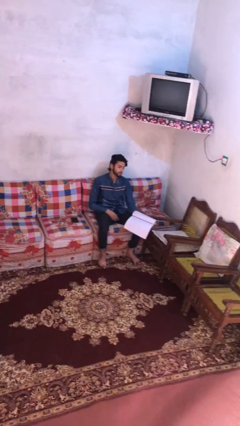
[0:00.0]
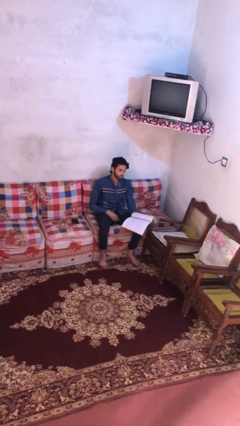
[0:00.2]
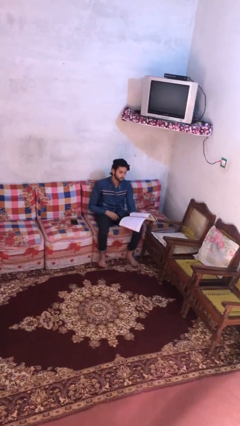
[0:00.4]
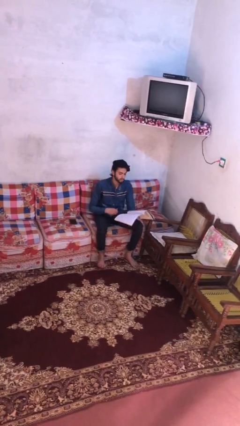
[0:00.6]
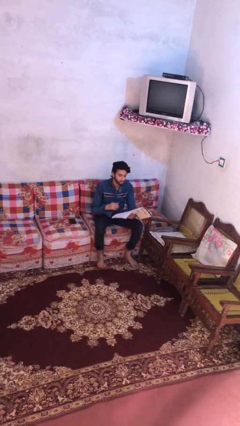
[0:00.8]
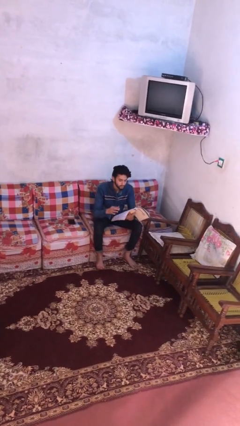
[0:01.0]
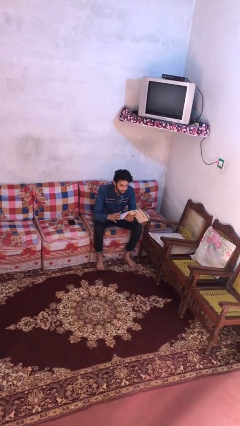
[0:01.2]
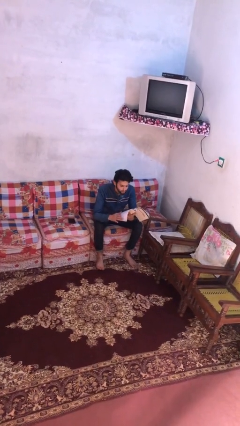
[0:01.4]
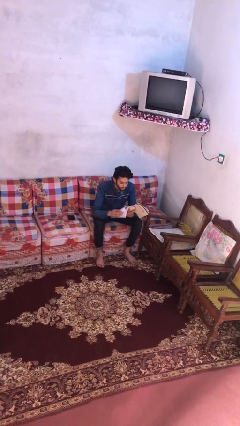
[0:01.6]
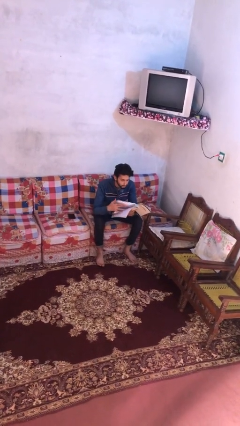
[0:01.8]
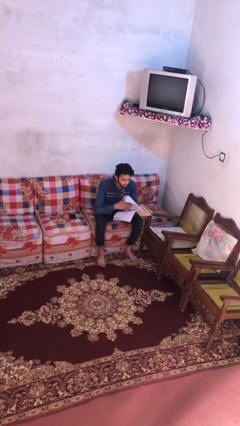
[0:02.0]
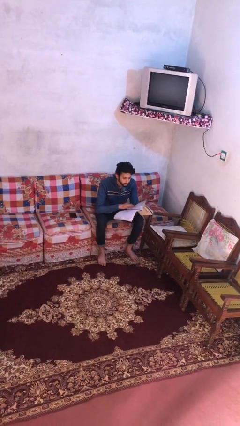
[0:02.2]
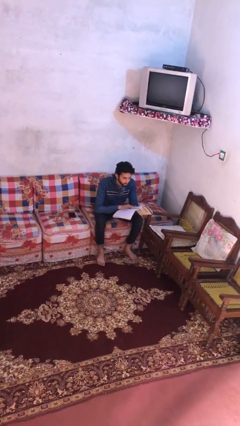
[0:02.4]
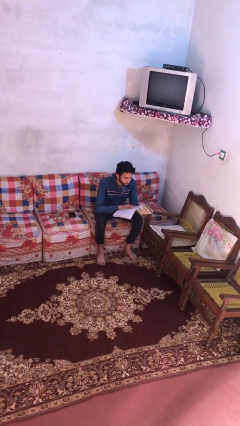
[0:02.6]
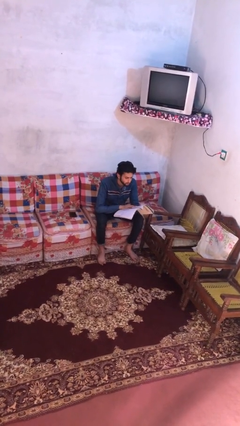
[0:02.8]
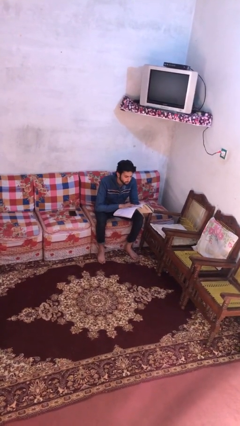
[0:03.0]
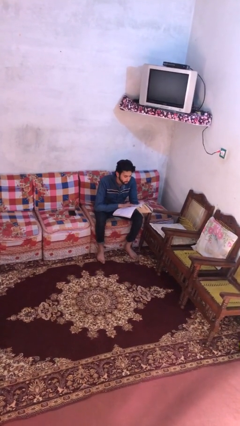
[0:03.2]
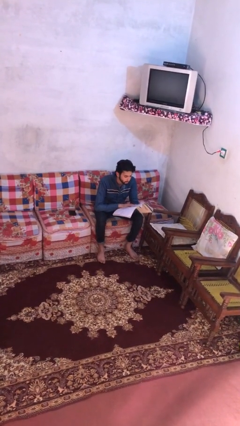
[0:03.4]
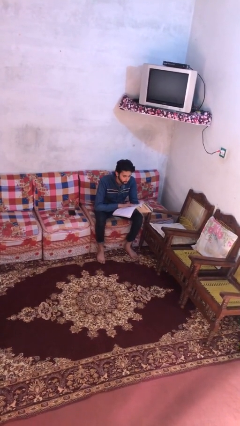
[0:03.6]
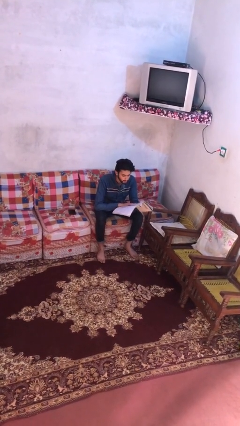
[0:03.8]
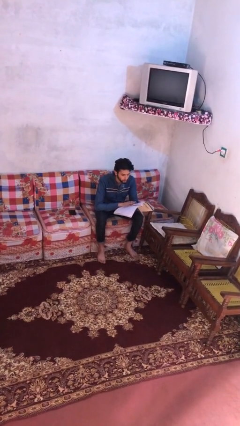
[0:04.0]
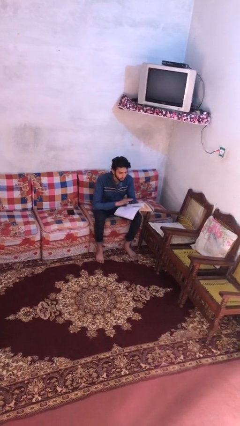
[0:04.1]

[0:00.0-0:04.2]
person reads document

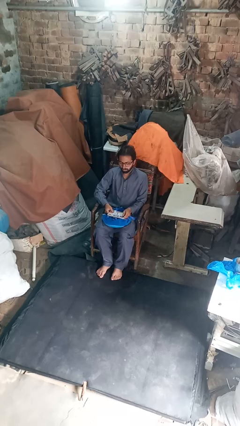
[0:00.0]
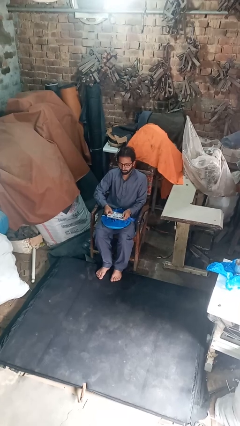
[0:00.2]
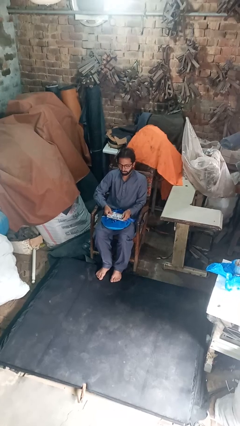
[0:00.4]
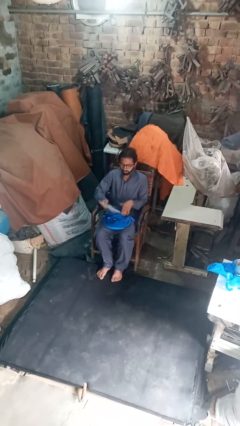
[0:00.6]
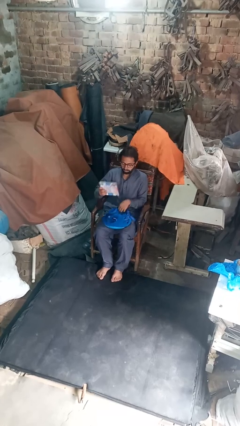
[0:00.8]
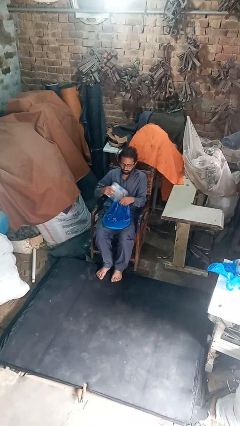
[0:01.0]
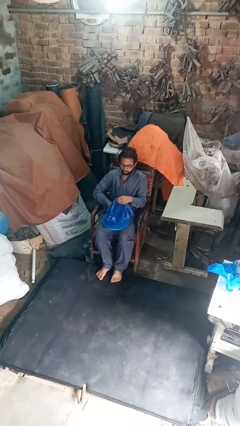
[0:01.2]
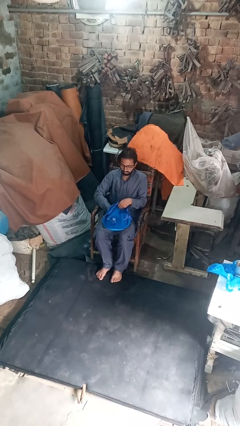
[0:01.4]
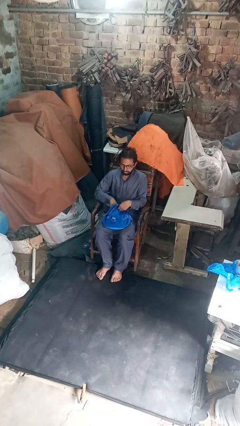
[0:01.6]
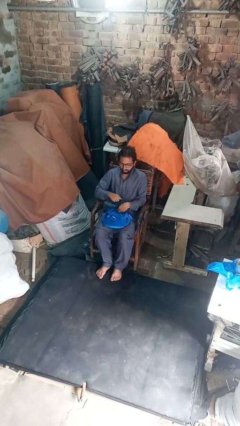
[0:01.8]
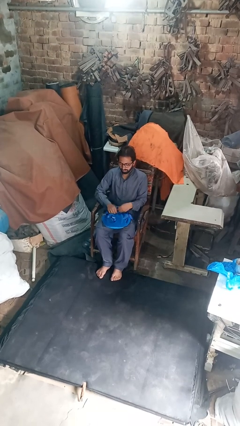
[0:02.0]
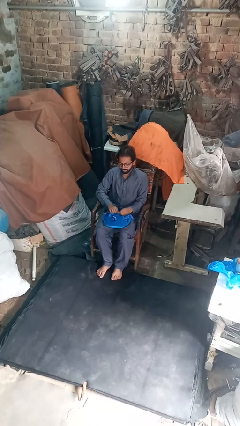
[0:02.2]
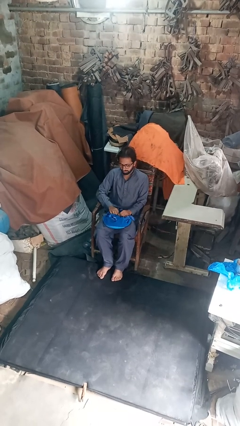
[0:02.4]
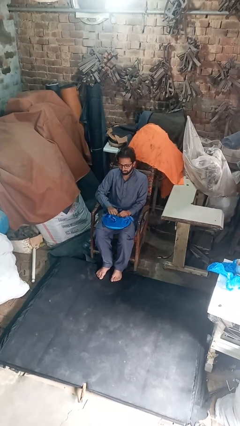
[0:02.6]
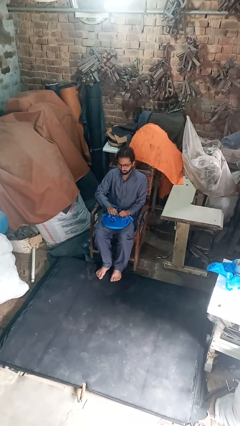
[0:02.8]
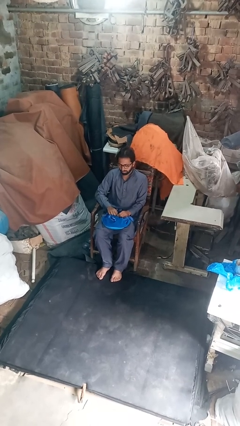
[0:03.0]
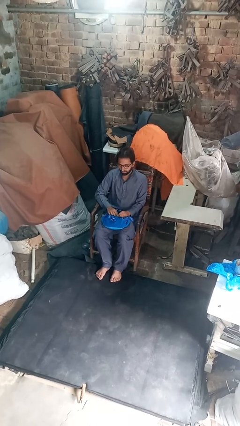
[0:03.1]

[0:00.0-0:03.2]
person puts object into backpack

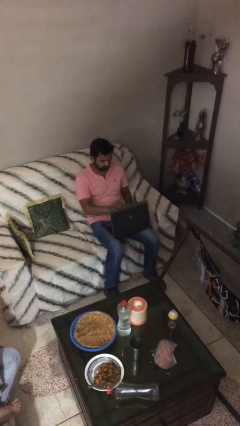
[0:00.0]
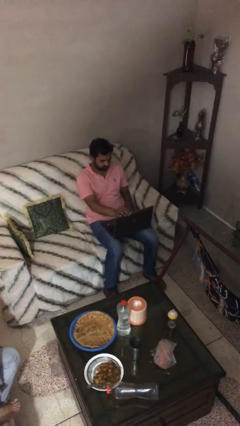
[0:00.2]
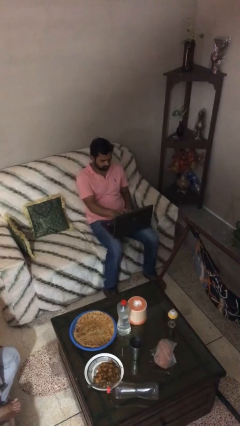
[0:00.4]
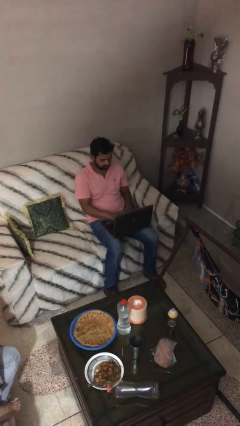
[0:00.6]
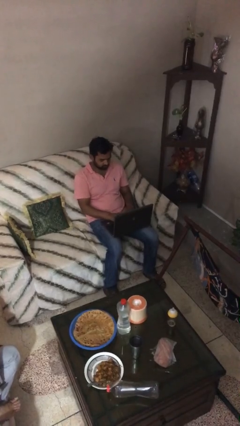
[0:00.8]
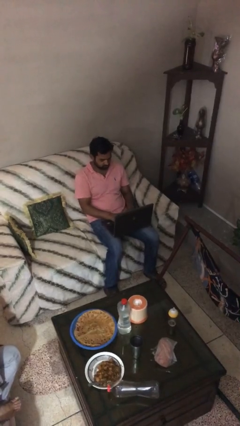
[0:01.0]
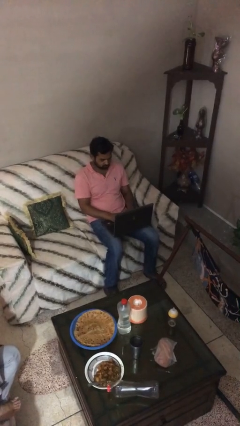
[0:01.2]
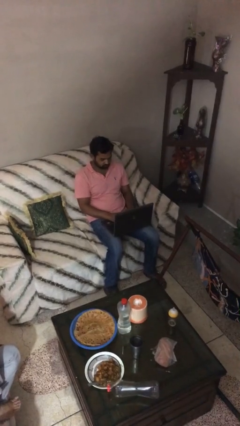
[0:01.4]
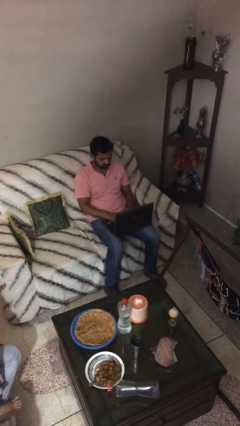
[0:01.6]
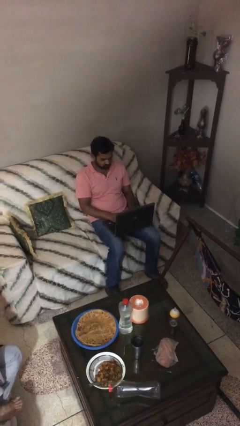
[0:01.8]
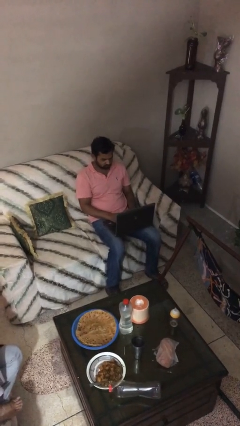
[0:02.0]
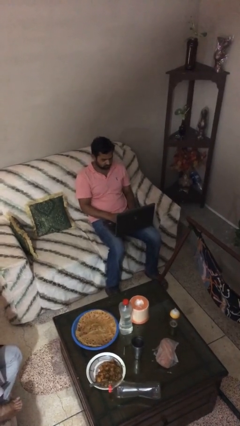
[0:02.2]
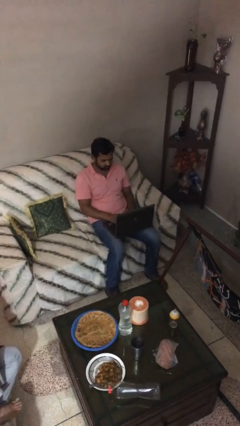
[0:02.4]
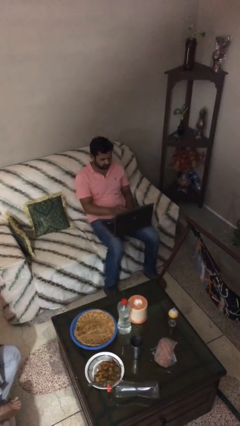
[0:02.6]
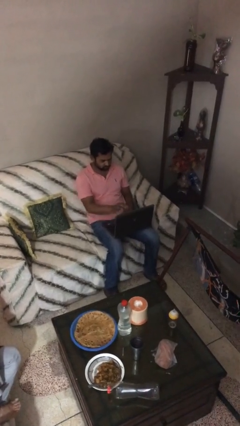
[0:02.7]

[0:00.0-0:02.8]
person interacts with laptop

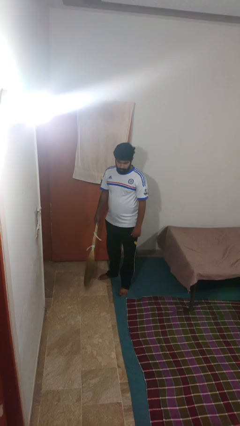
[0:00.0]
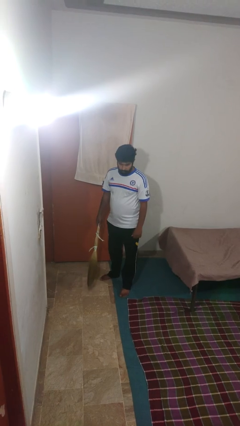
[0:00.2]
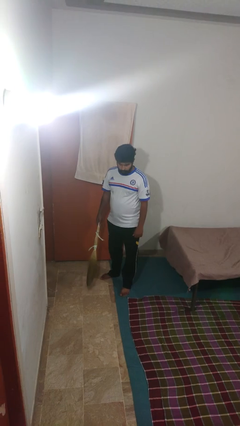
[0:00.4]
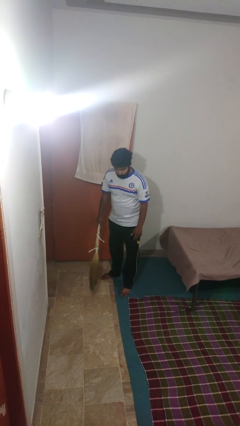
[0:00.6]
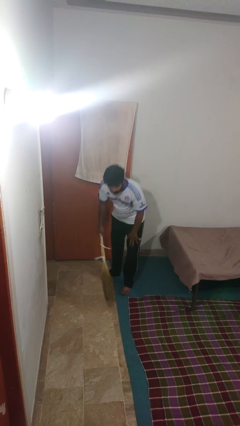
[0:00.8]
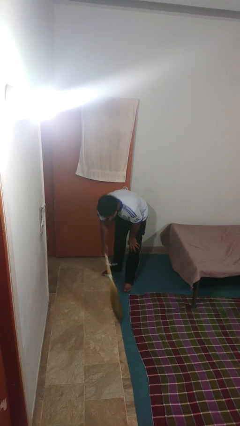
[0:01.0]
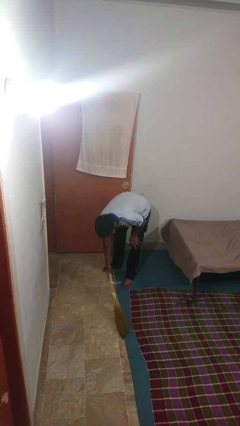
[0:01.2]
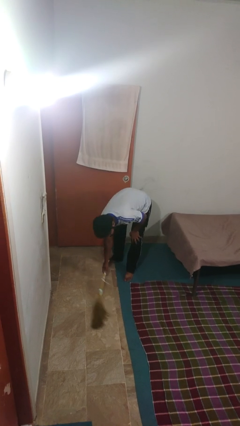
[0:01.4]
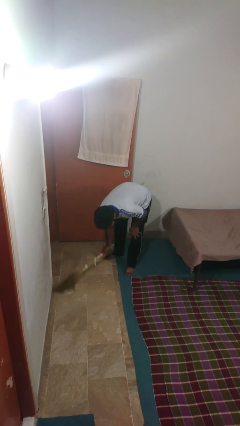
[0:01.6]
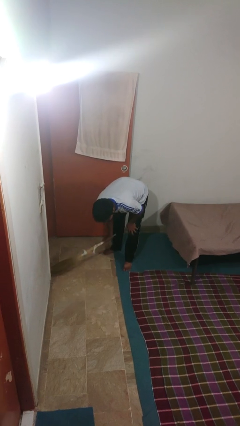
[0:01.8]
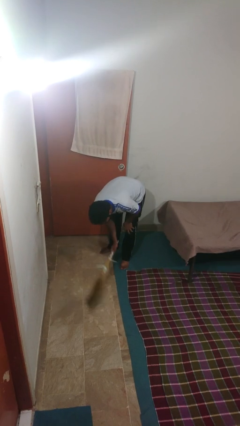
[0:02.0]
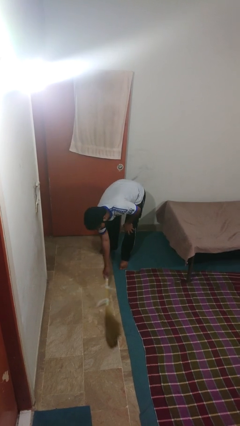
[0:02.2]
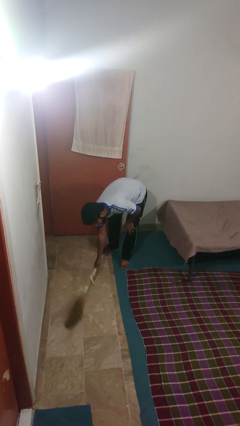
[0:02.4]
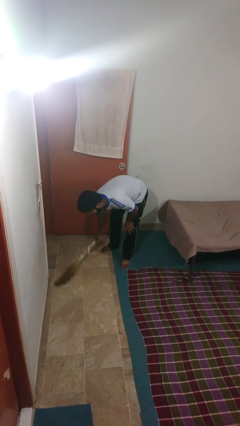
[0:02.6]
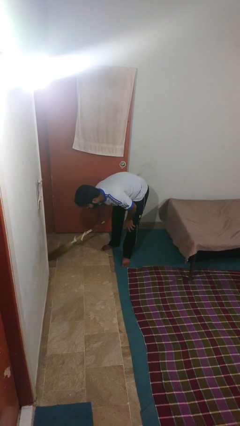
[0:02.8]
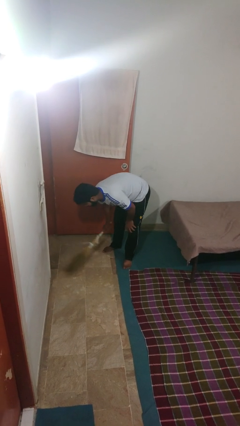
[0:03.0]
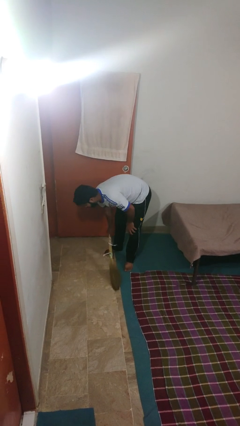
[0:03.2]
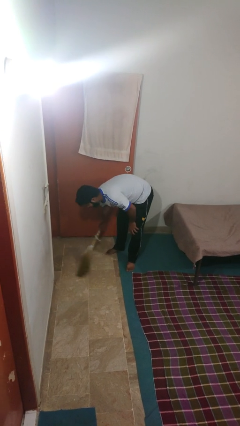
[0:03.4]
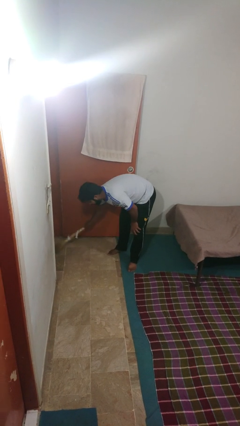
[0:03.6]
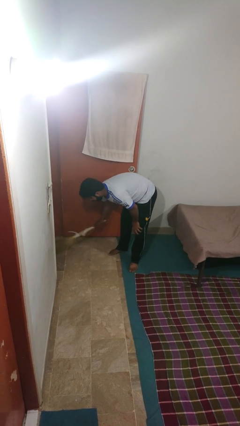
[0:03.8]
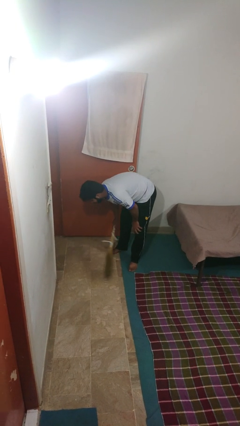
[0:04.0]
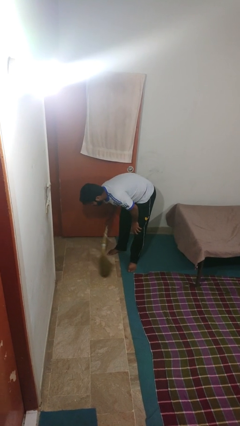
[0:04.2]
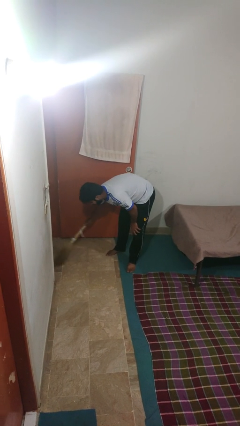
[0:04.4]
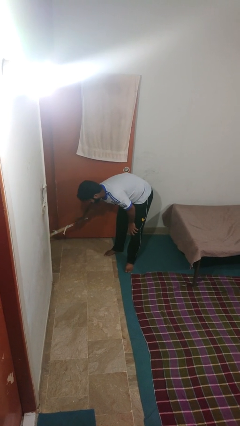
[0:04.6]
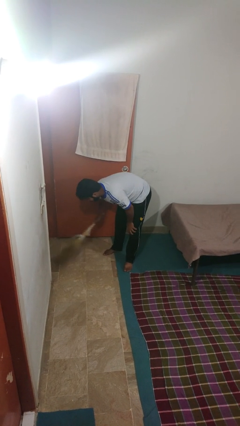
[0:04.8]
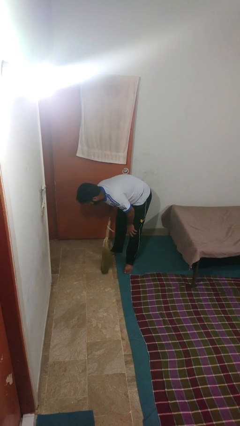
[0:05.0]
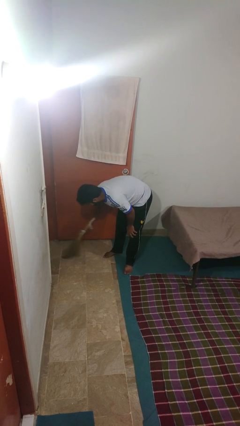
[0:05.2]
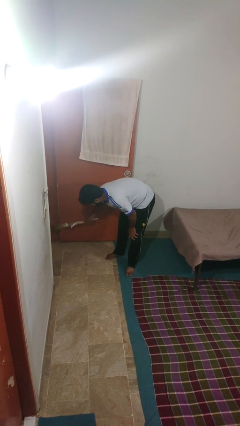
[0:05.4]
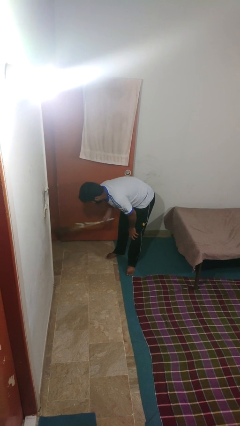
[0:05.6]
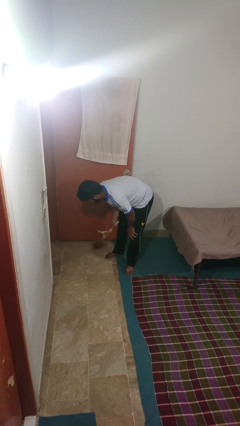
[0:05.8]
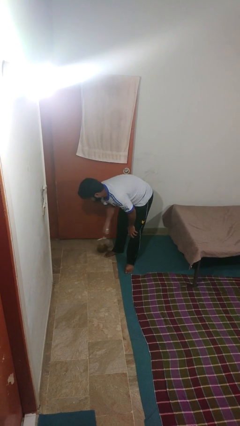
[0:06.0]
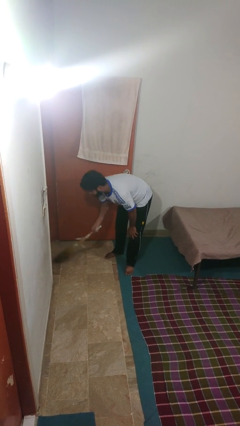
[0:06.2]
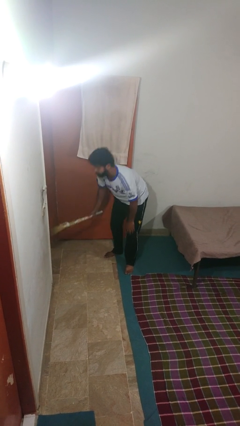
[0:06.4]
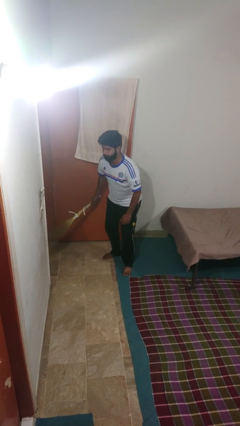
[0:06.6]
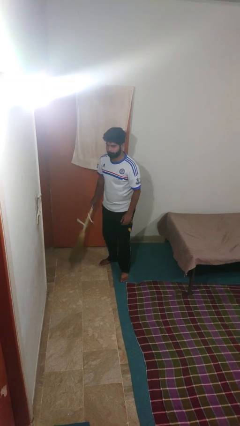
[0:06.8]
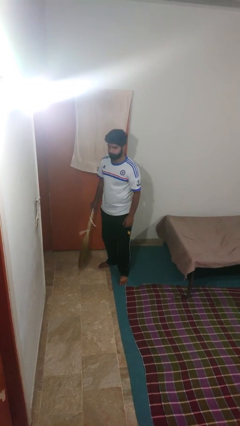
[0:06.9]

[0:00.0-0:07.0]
person sweeps floor

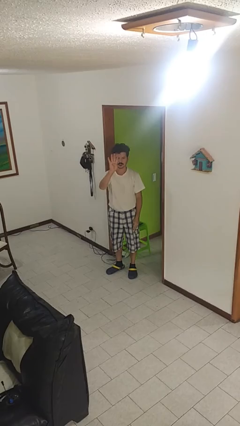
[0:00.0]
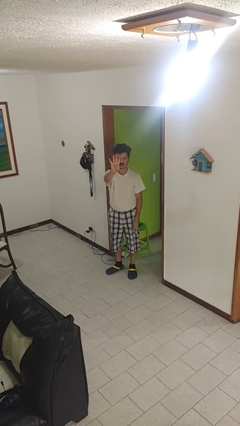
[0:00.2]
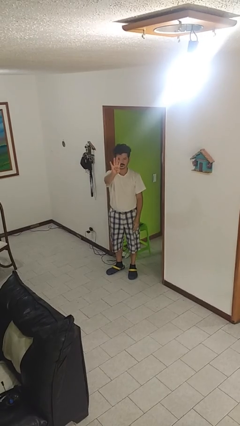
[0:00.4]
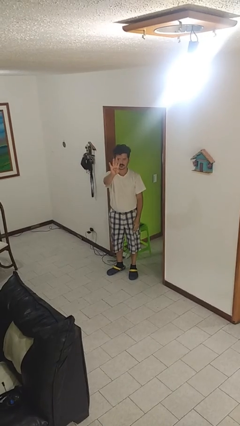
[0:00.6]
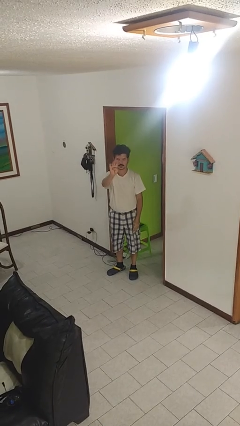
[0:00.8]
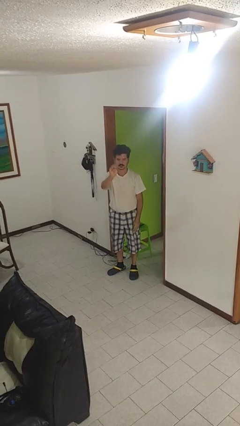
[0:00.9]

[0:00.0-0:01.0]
person gestures number four
